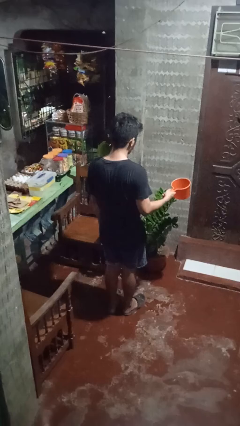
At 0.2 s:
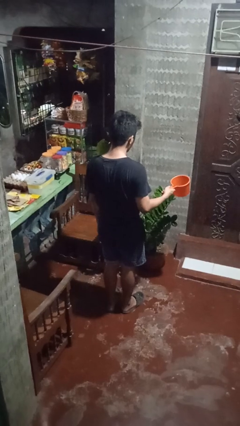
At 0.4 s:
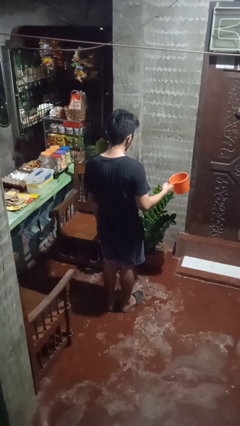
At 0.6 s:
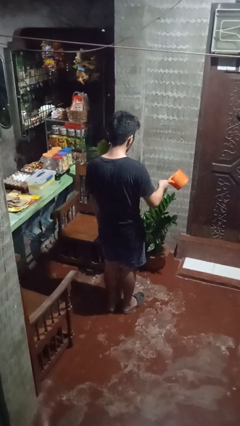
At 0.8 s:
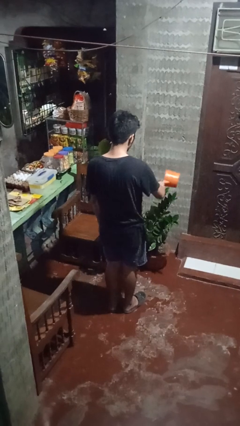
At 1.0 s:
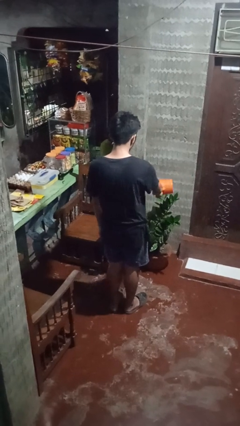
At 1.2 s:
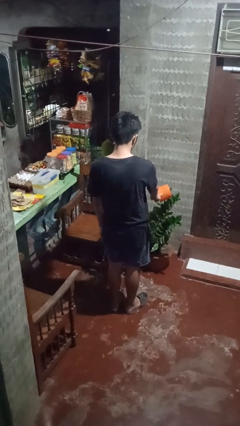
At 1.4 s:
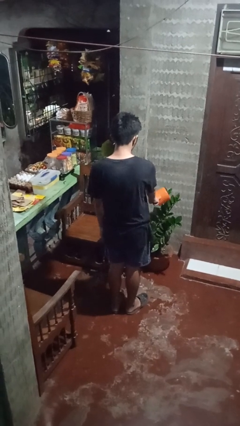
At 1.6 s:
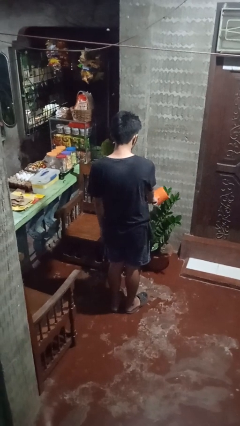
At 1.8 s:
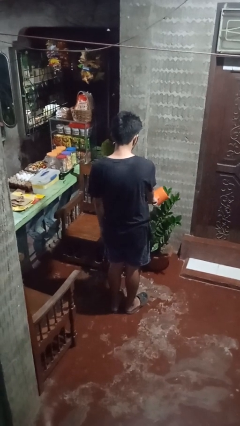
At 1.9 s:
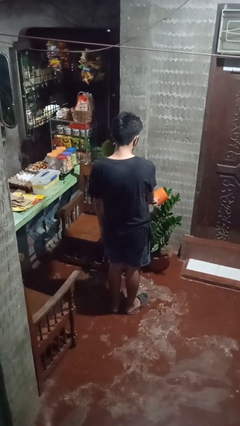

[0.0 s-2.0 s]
person waters houseplant

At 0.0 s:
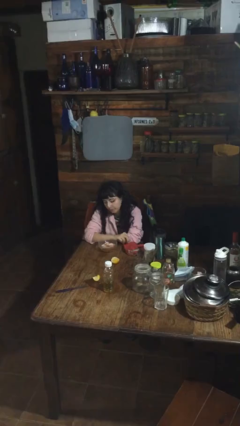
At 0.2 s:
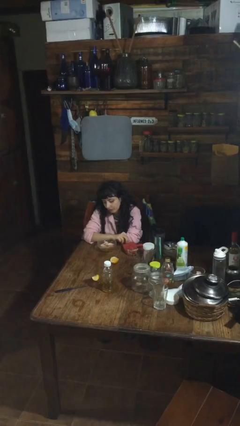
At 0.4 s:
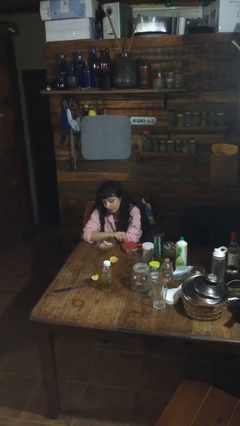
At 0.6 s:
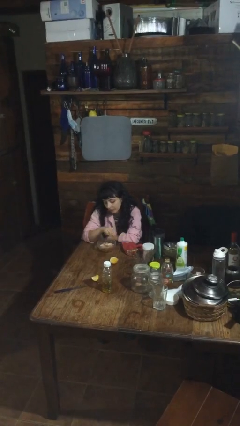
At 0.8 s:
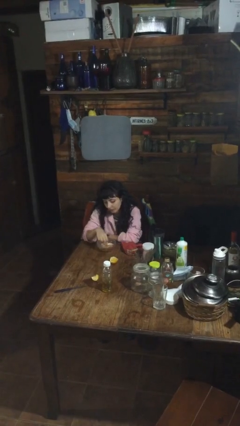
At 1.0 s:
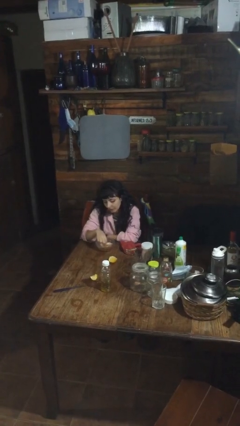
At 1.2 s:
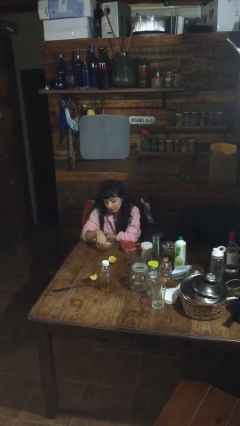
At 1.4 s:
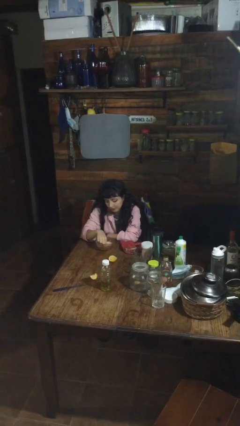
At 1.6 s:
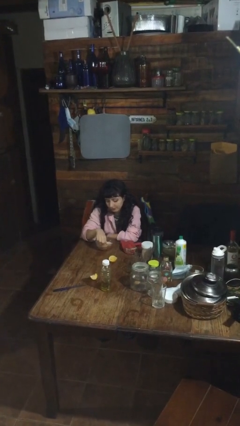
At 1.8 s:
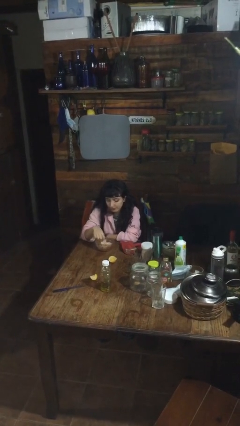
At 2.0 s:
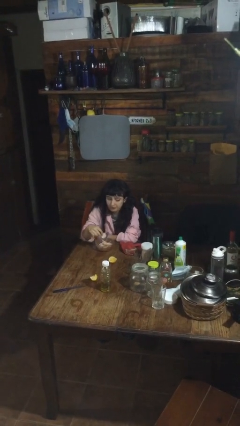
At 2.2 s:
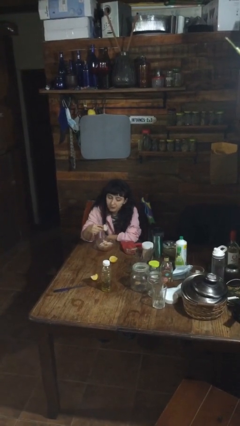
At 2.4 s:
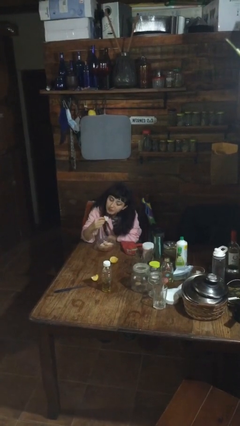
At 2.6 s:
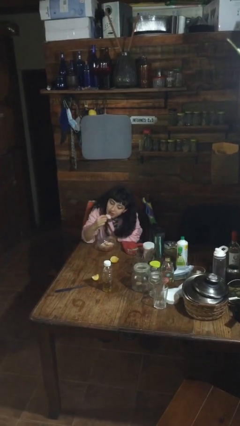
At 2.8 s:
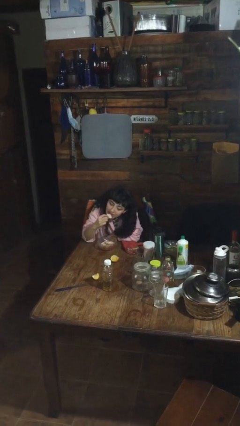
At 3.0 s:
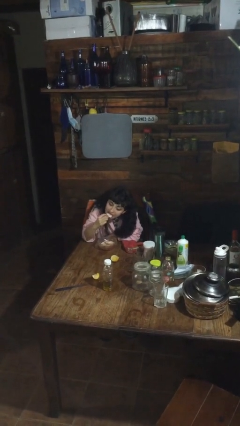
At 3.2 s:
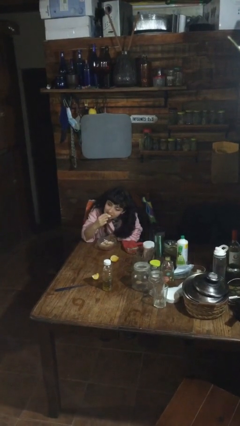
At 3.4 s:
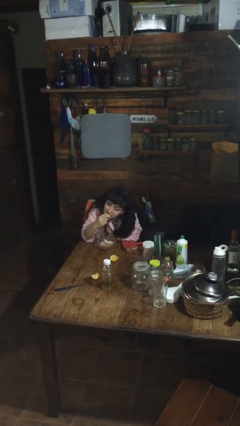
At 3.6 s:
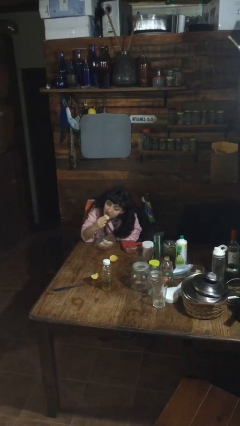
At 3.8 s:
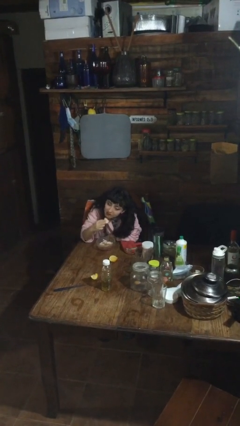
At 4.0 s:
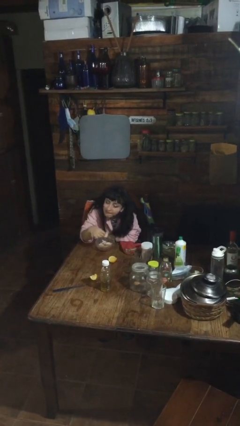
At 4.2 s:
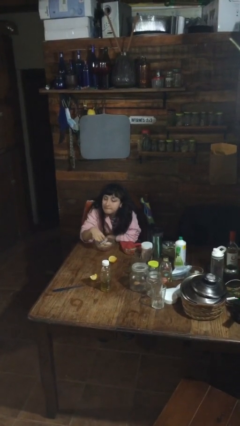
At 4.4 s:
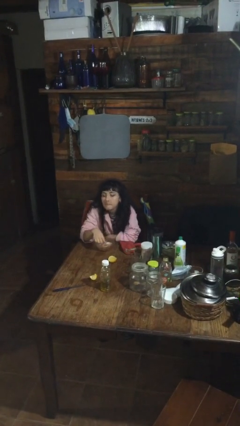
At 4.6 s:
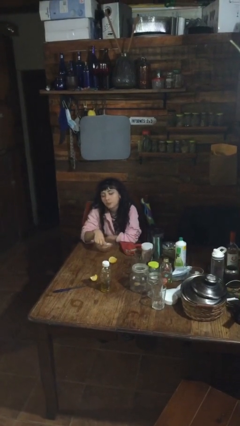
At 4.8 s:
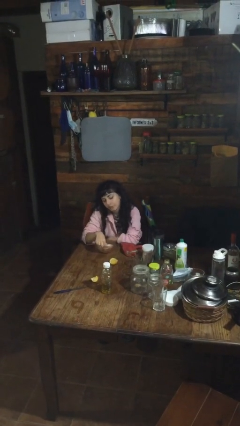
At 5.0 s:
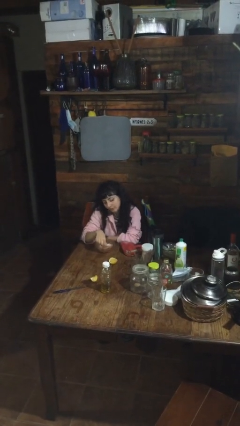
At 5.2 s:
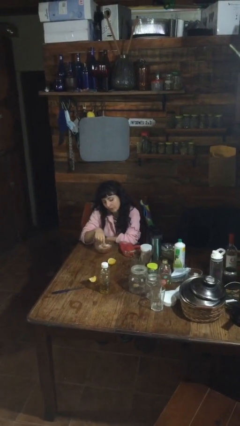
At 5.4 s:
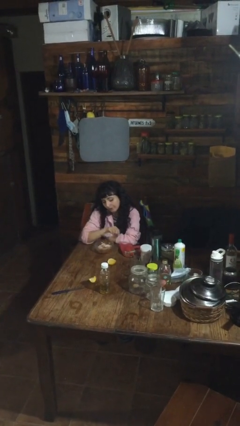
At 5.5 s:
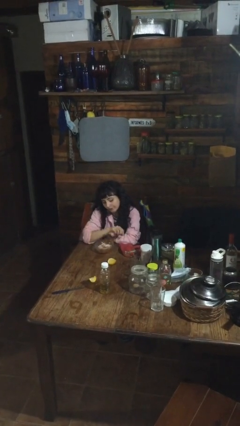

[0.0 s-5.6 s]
person eats with hands

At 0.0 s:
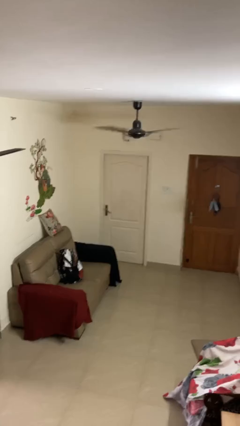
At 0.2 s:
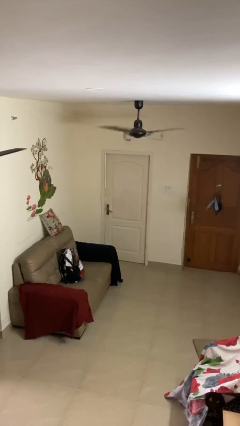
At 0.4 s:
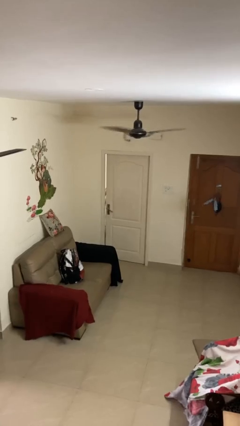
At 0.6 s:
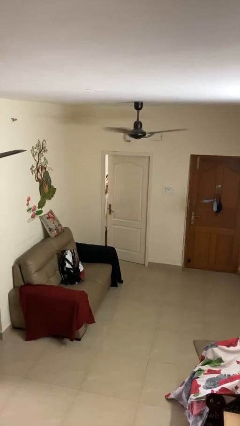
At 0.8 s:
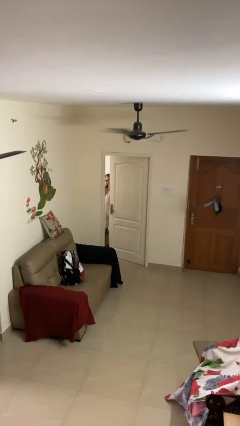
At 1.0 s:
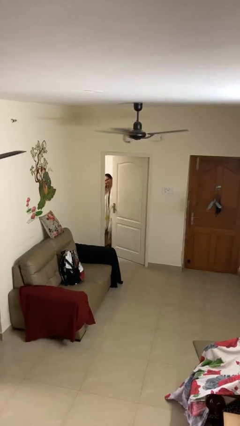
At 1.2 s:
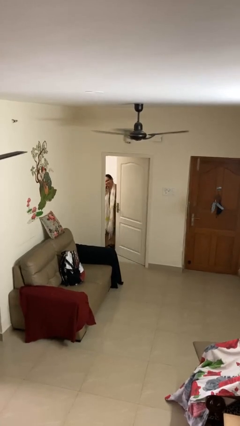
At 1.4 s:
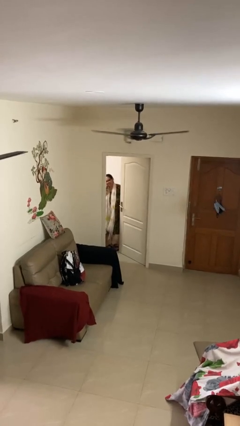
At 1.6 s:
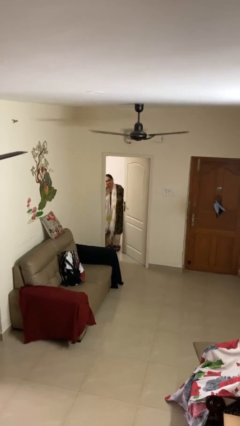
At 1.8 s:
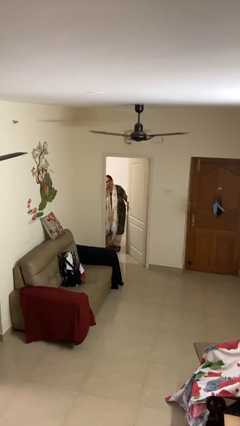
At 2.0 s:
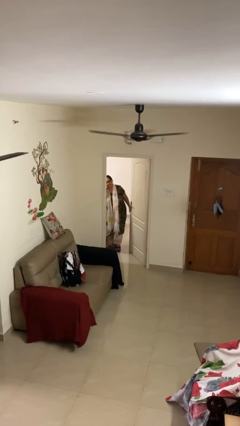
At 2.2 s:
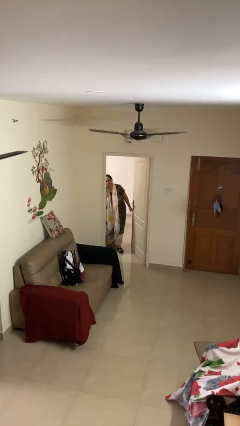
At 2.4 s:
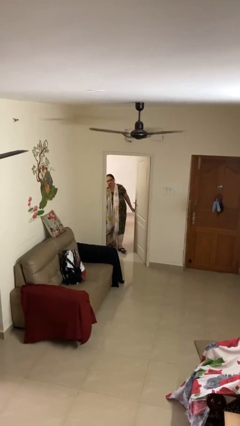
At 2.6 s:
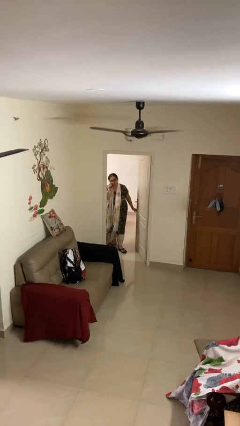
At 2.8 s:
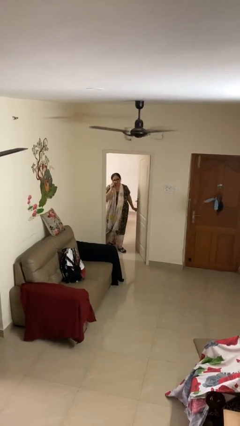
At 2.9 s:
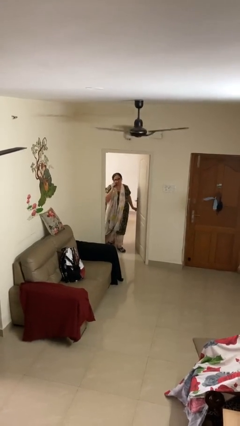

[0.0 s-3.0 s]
person opens facility door

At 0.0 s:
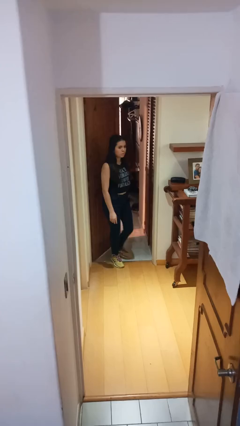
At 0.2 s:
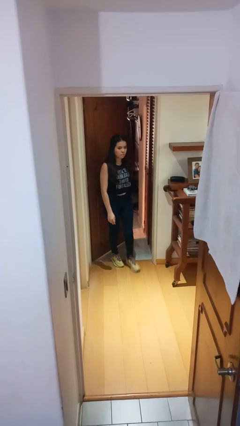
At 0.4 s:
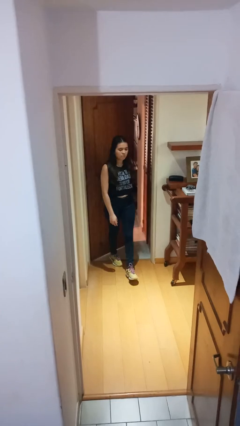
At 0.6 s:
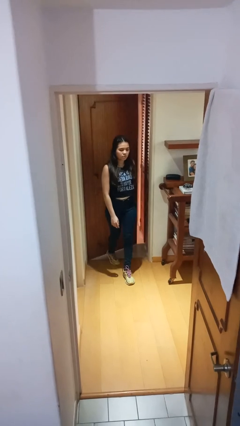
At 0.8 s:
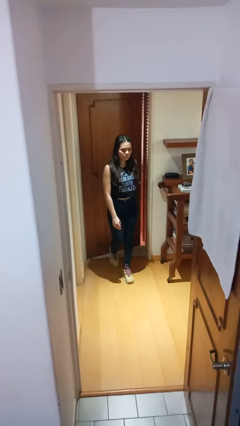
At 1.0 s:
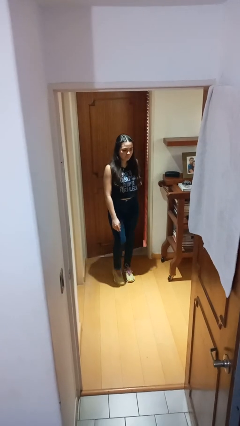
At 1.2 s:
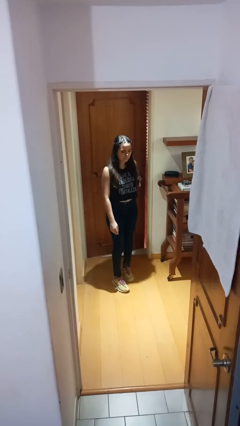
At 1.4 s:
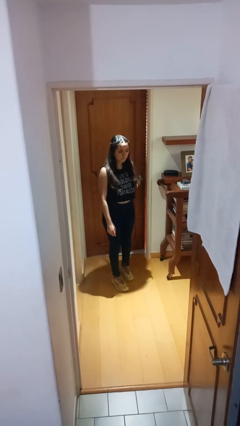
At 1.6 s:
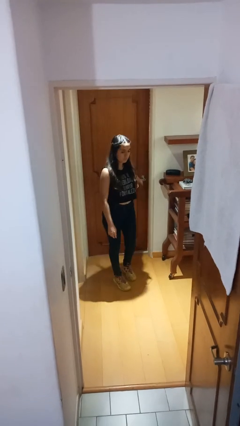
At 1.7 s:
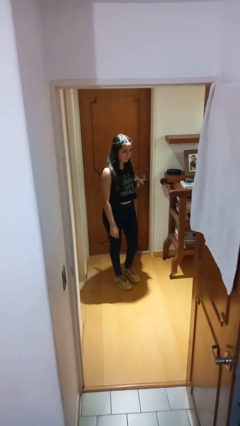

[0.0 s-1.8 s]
person closes facility door

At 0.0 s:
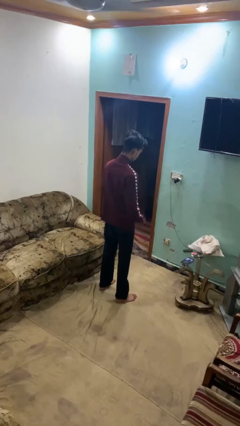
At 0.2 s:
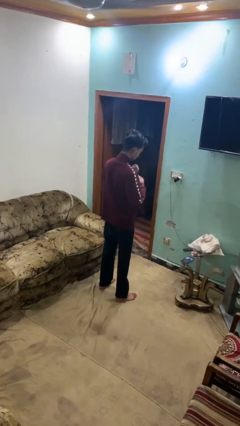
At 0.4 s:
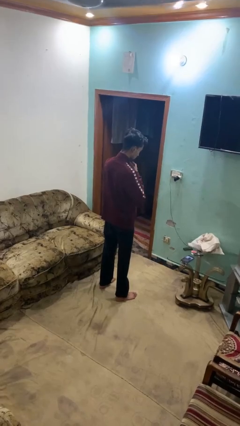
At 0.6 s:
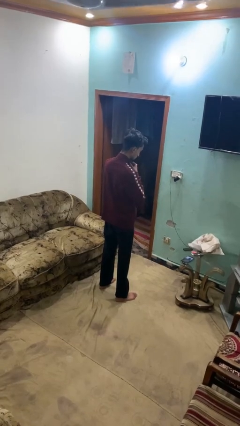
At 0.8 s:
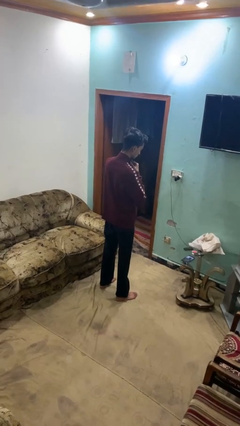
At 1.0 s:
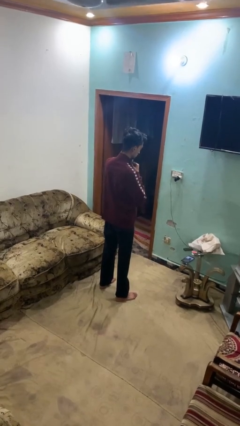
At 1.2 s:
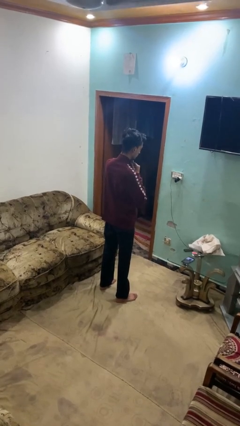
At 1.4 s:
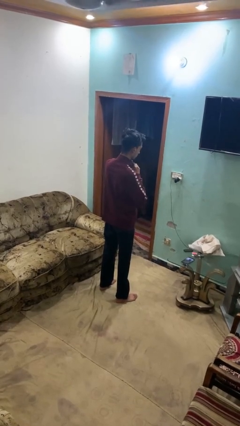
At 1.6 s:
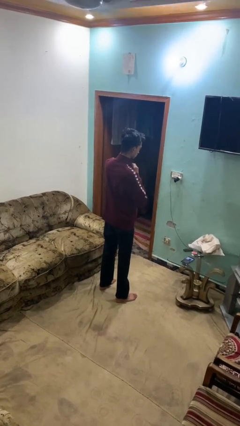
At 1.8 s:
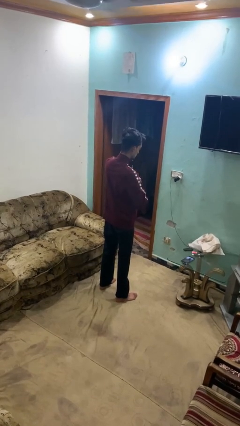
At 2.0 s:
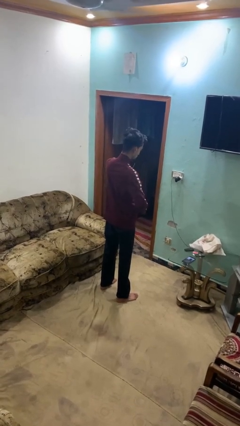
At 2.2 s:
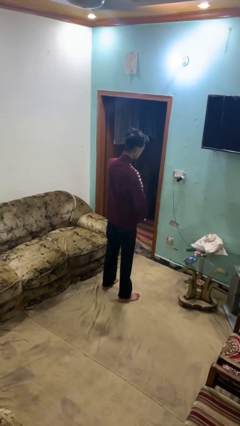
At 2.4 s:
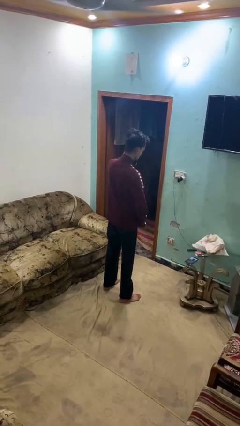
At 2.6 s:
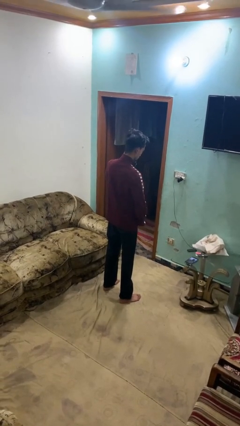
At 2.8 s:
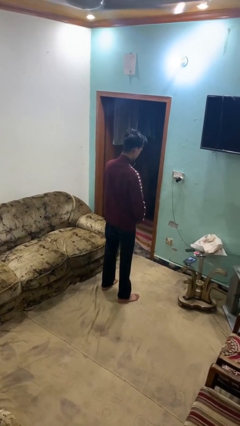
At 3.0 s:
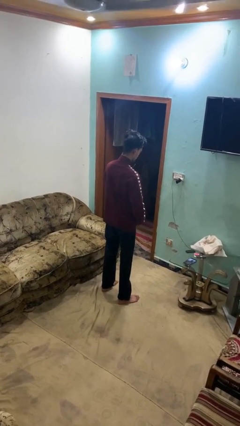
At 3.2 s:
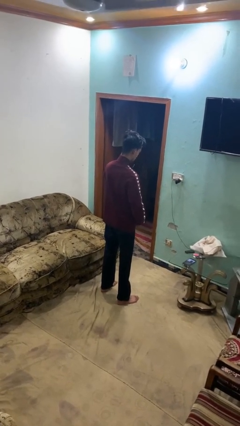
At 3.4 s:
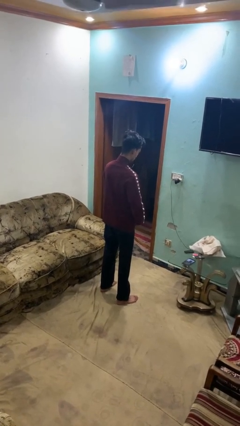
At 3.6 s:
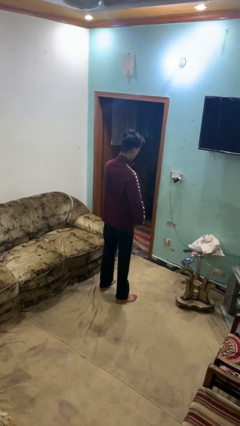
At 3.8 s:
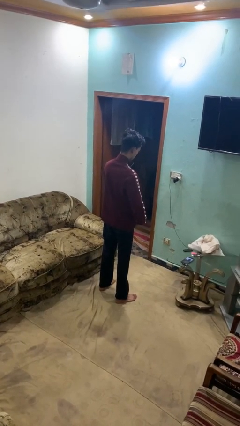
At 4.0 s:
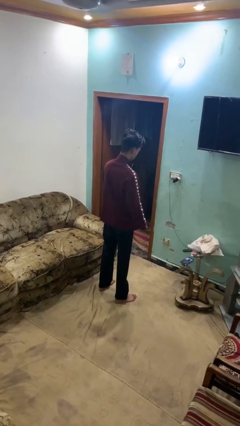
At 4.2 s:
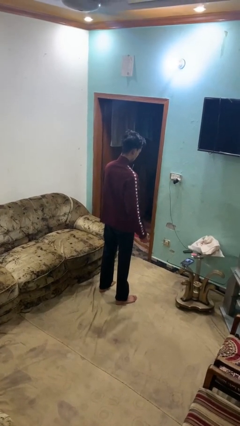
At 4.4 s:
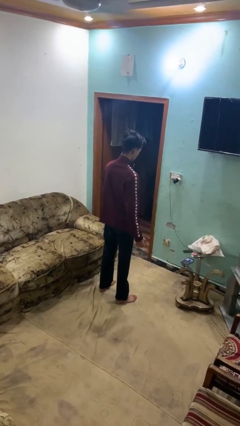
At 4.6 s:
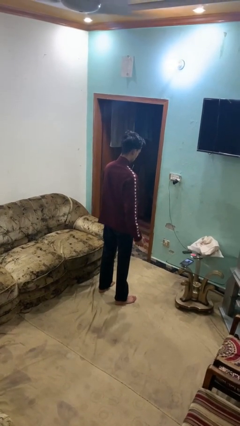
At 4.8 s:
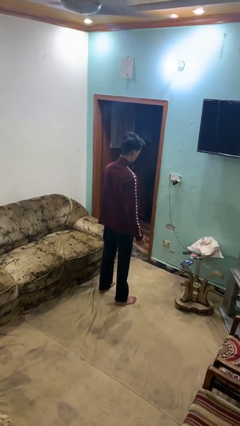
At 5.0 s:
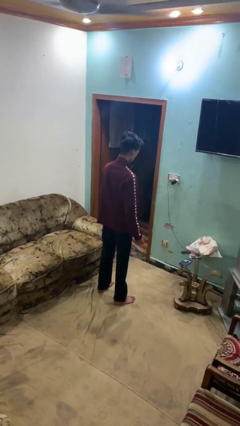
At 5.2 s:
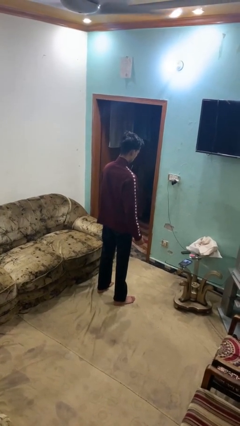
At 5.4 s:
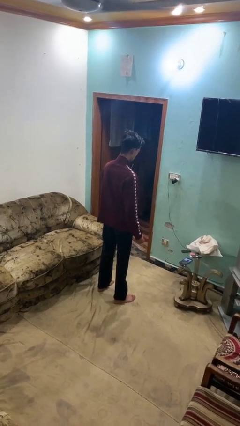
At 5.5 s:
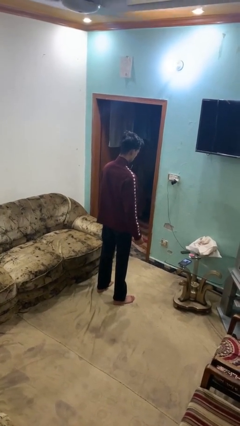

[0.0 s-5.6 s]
person unzips jacket
